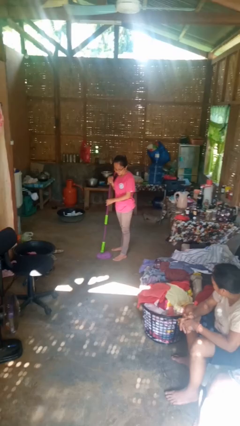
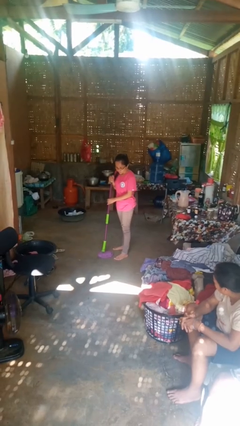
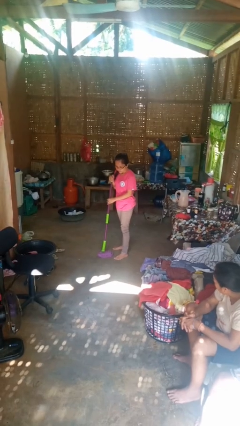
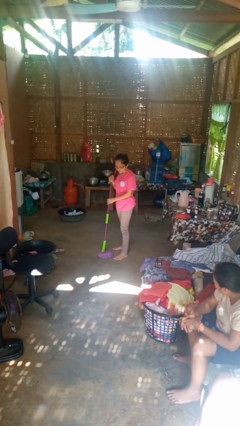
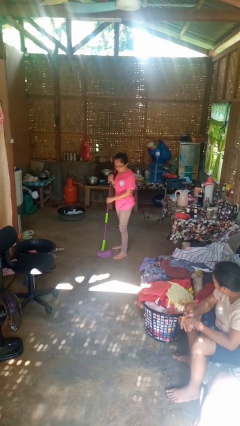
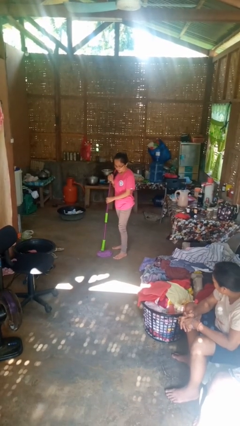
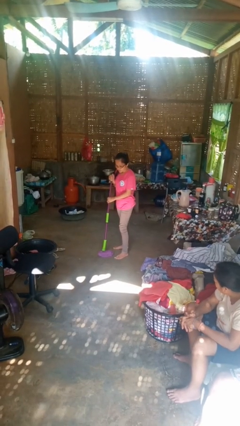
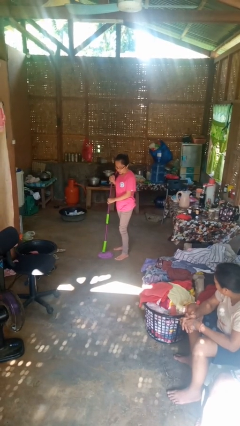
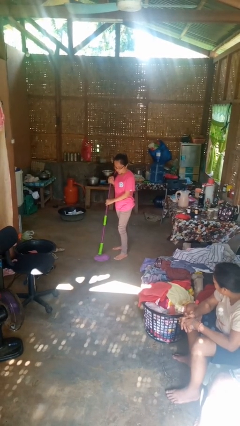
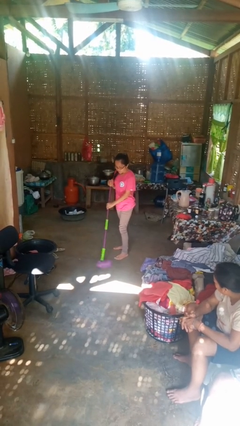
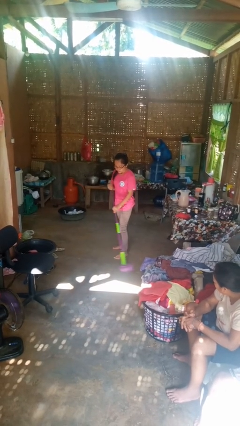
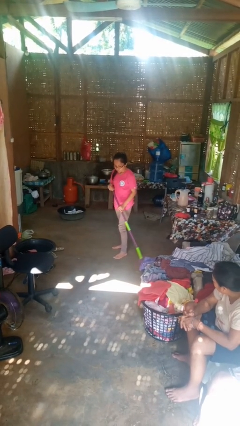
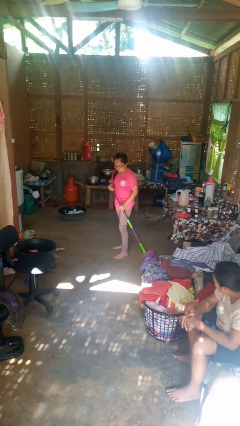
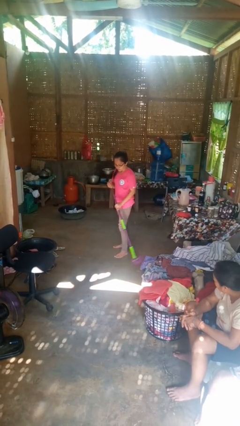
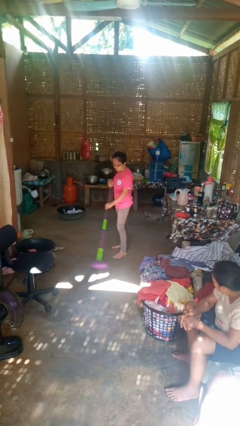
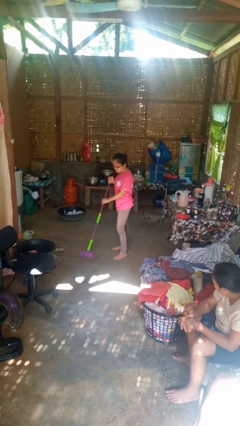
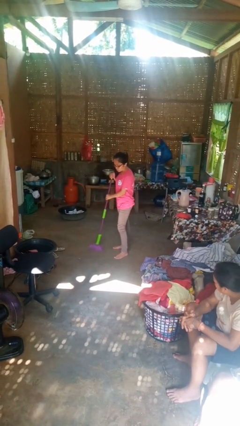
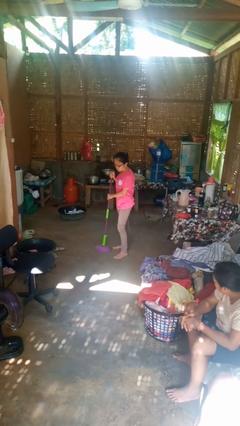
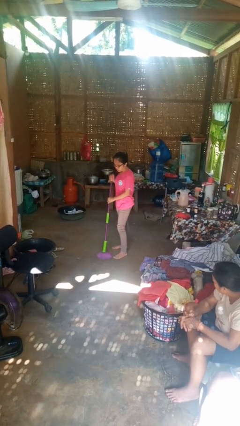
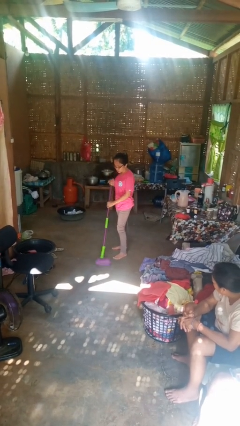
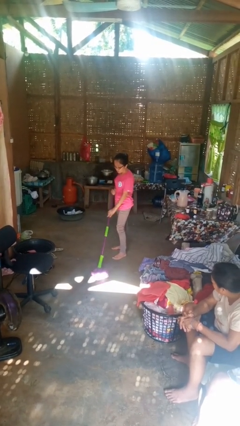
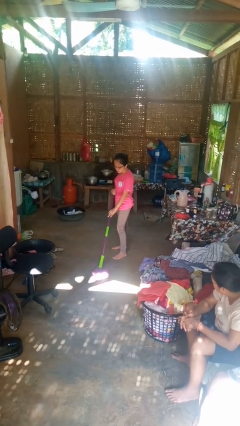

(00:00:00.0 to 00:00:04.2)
person mops

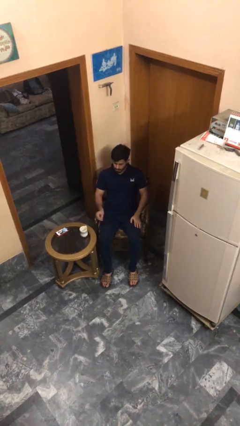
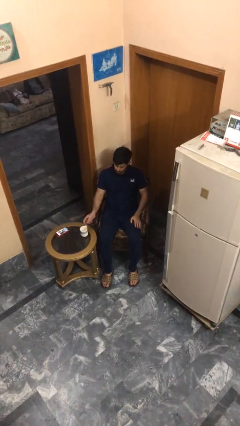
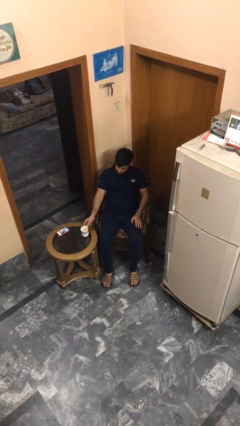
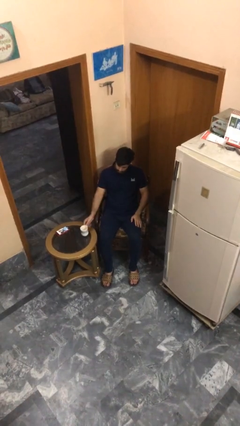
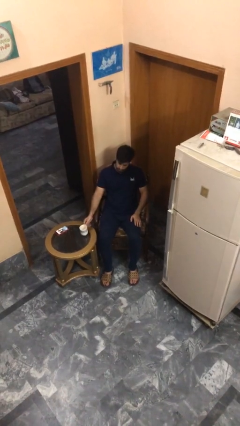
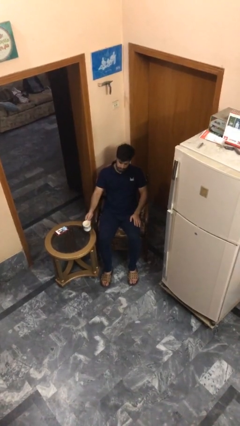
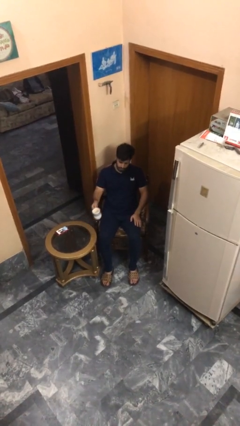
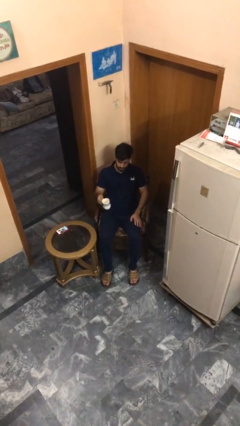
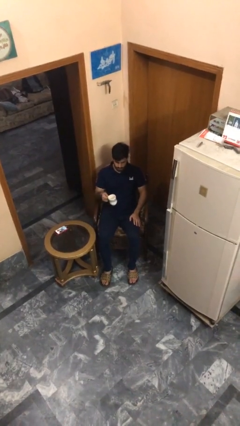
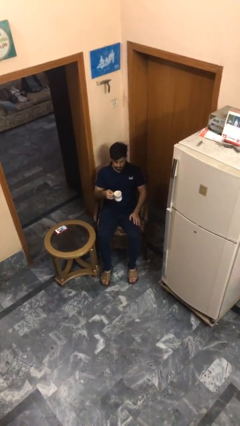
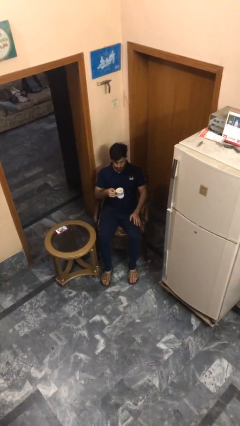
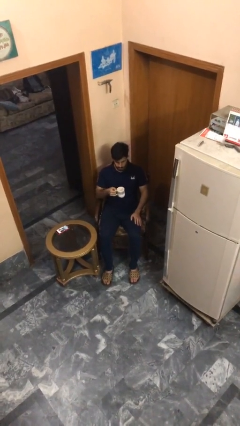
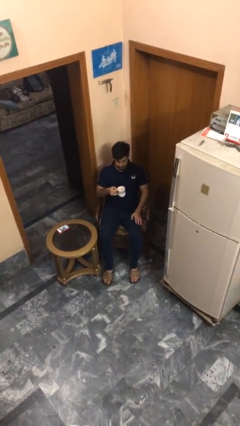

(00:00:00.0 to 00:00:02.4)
person picks up object from table

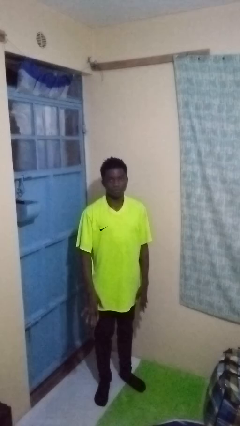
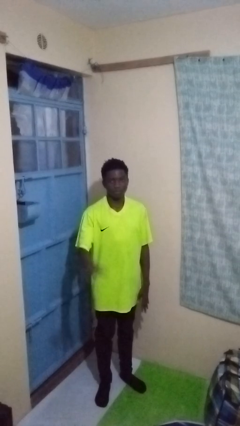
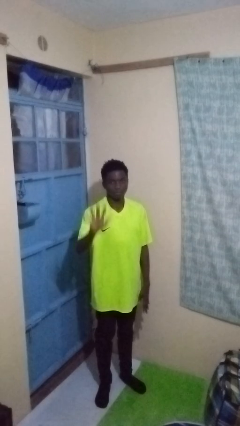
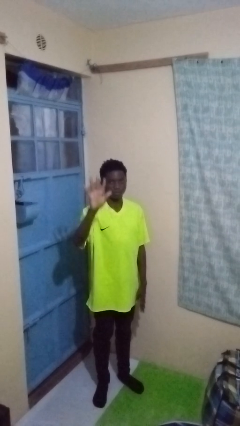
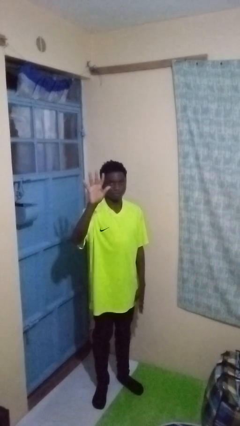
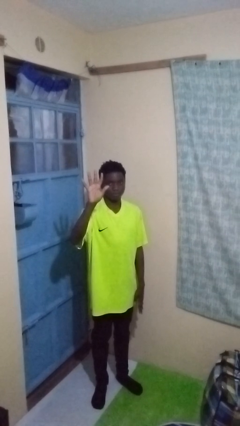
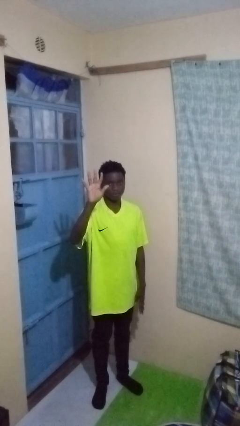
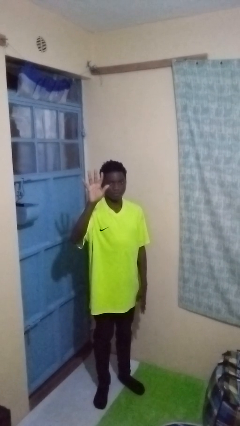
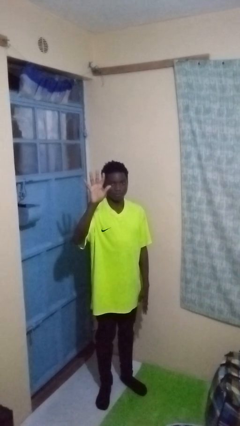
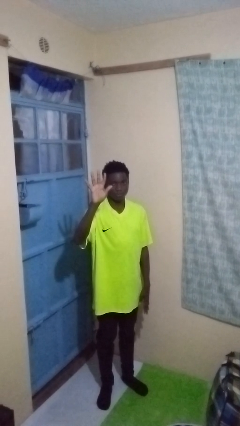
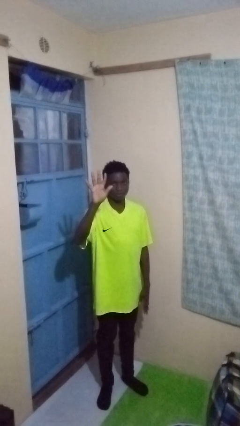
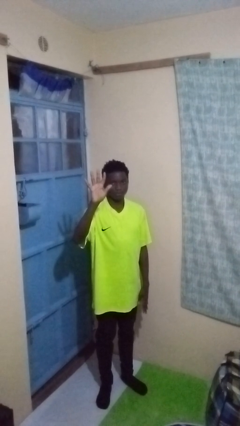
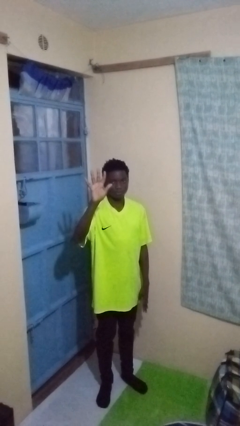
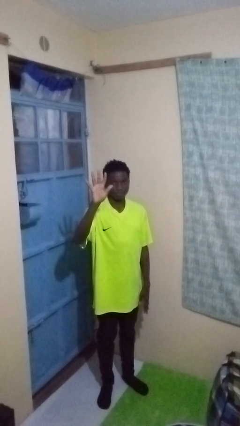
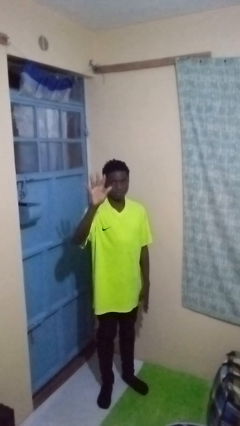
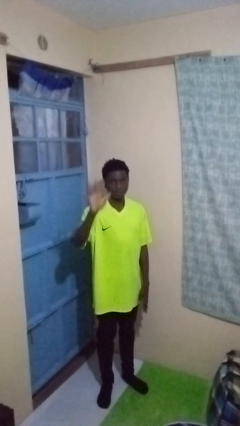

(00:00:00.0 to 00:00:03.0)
person gestures number five

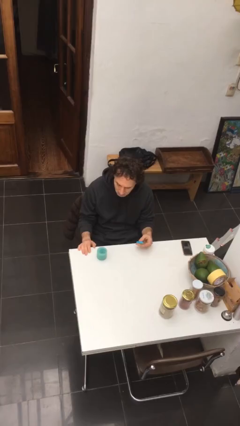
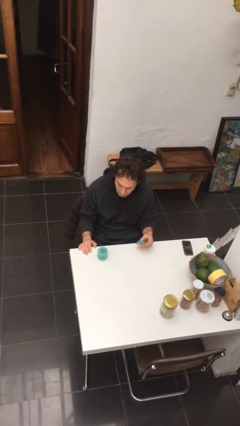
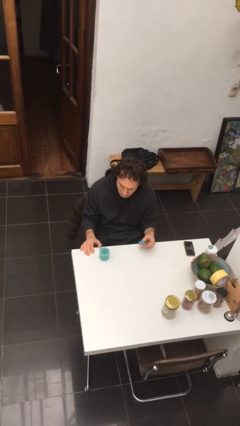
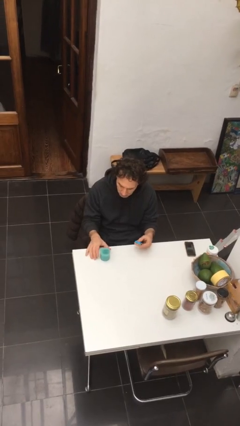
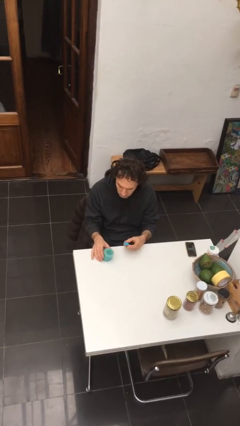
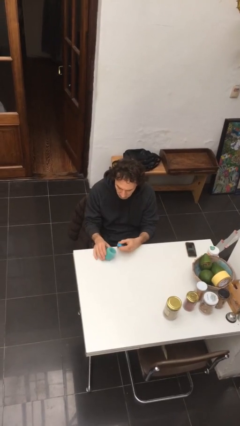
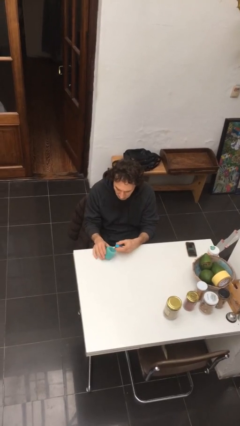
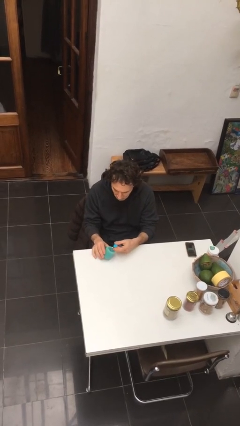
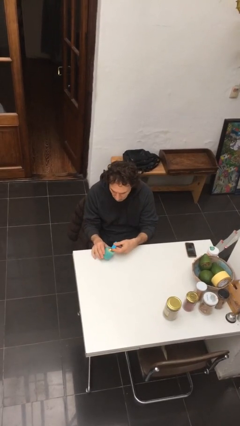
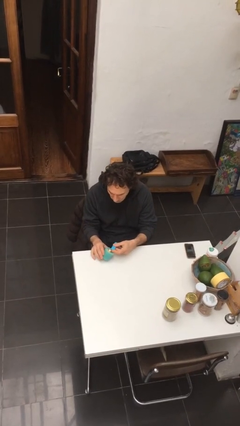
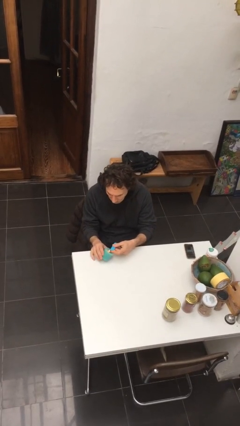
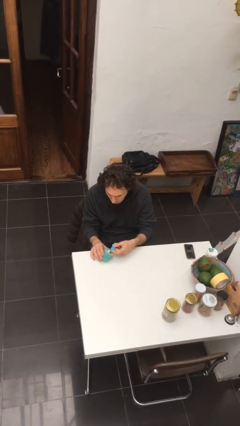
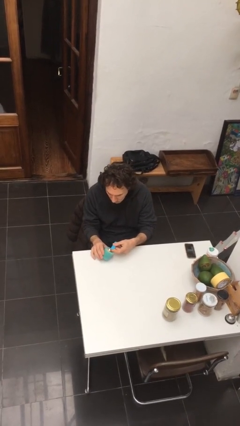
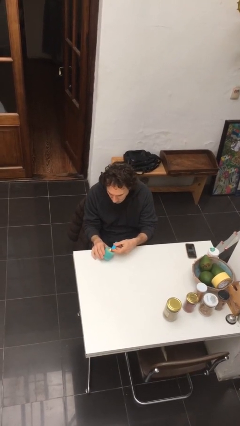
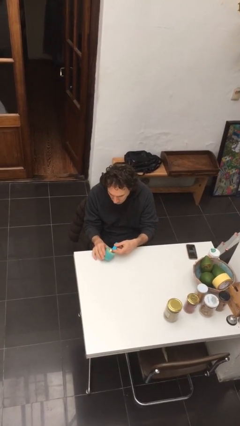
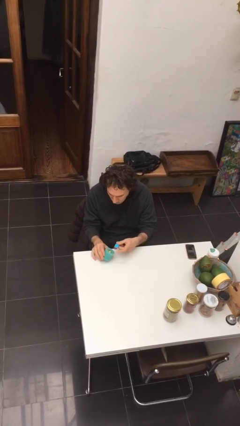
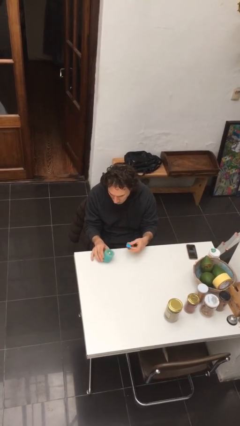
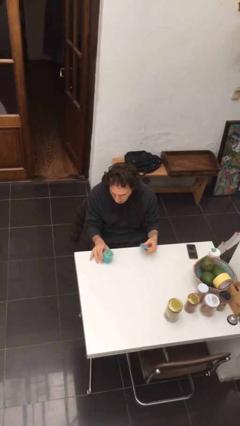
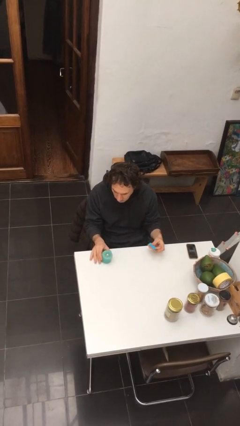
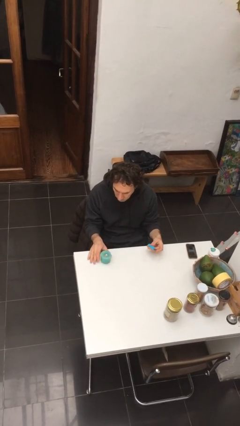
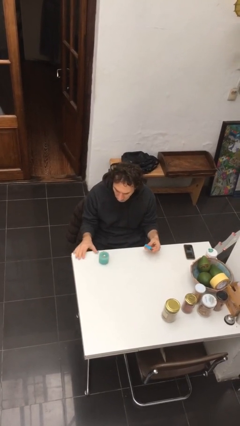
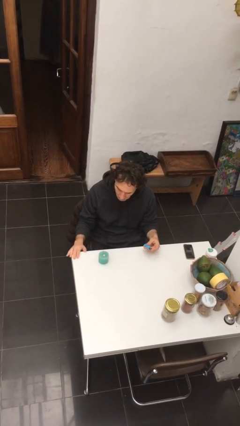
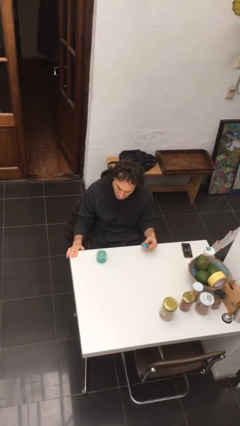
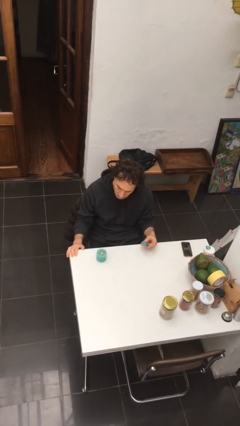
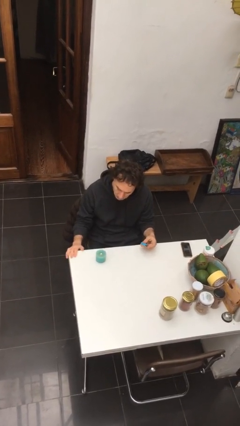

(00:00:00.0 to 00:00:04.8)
person lights candle

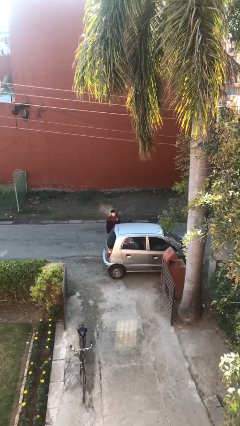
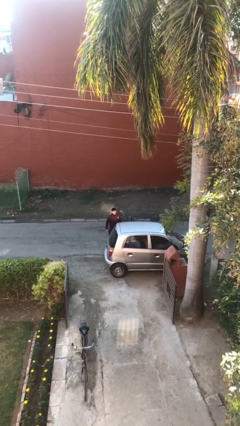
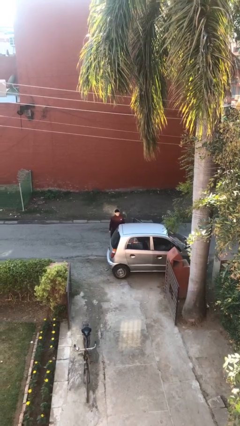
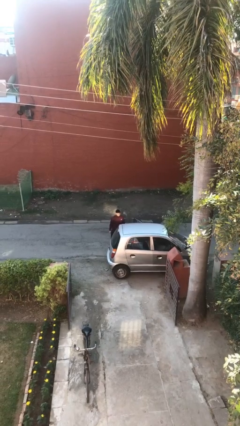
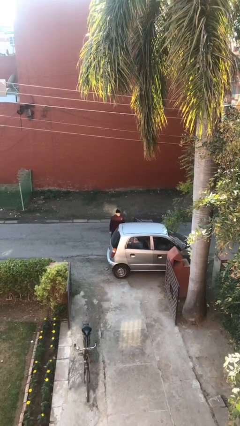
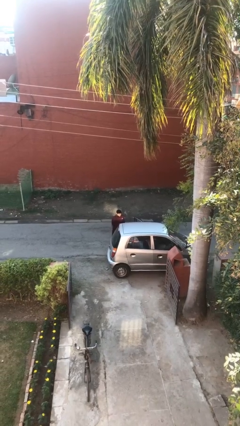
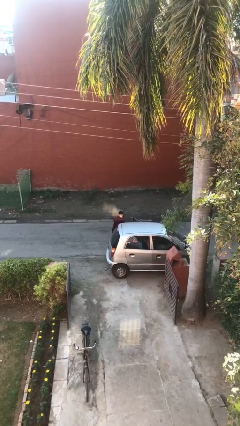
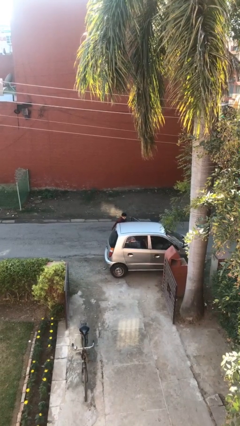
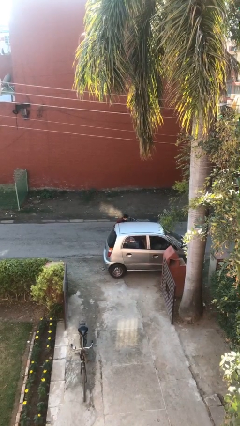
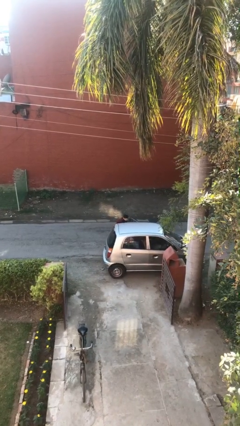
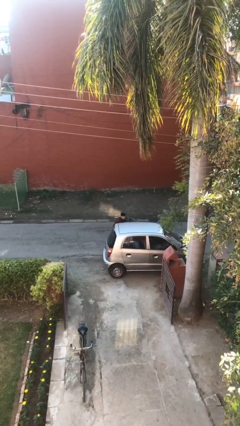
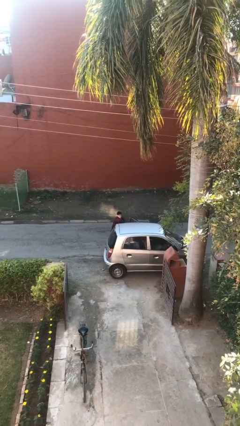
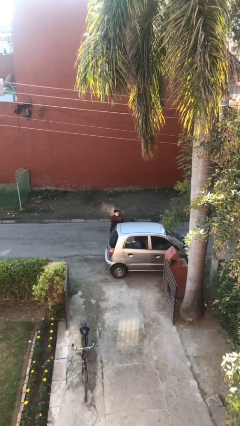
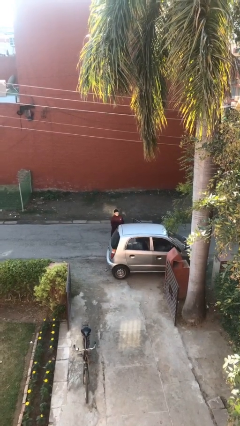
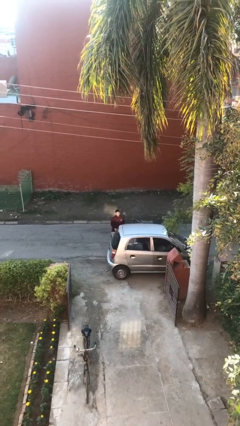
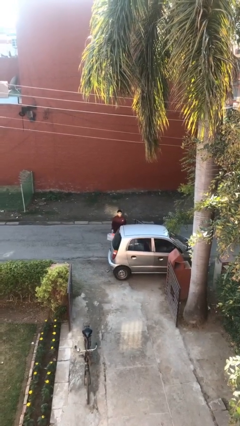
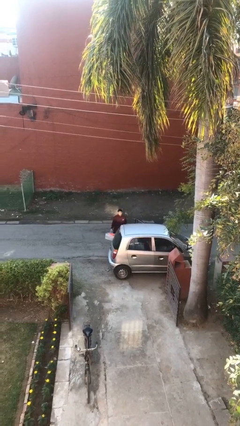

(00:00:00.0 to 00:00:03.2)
person unloads car
